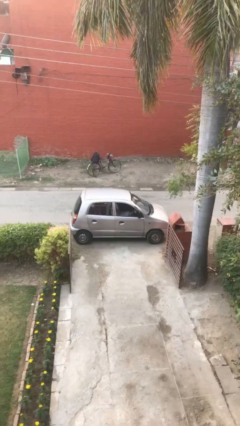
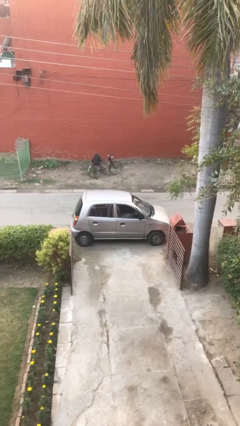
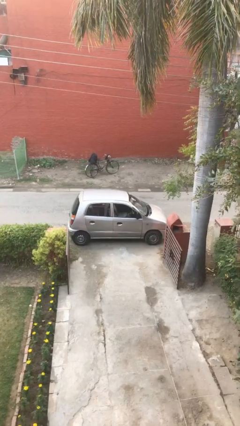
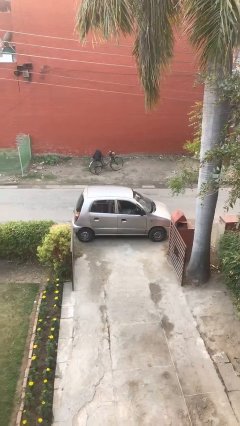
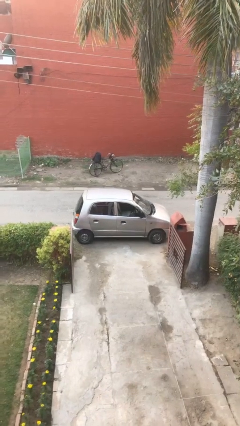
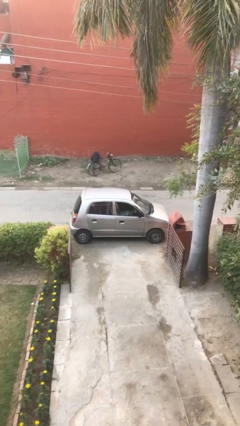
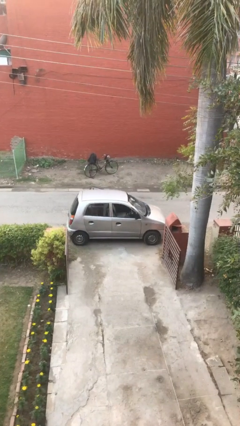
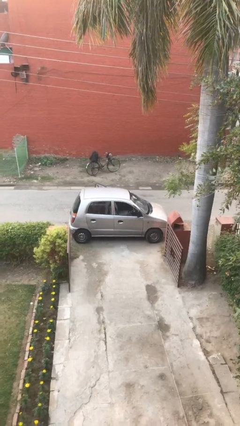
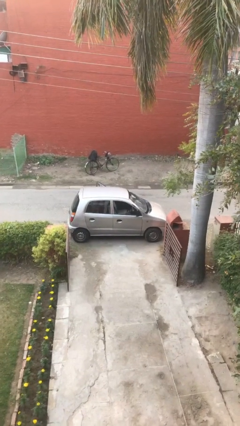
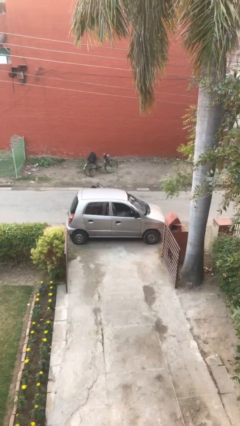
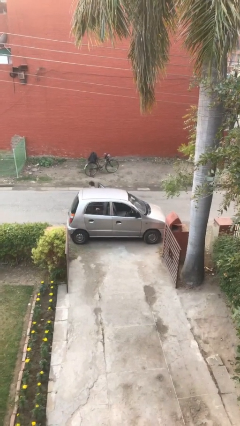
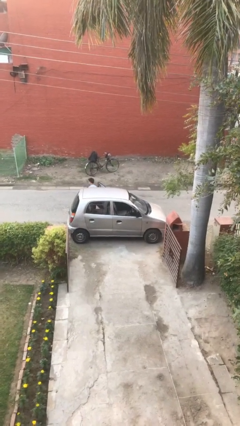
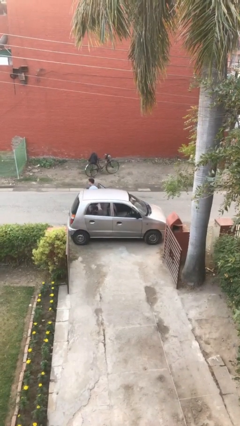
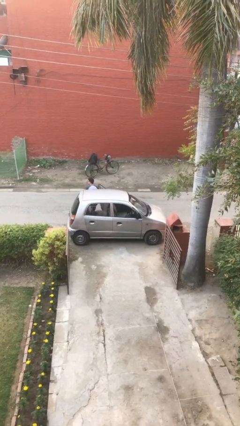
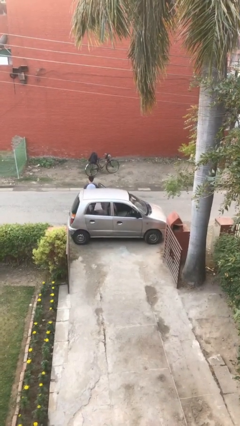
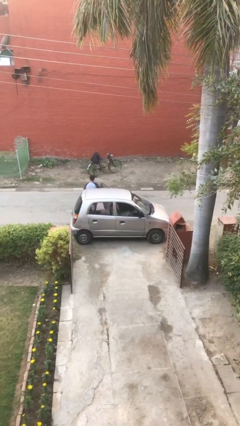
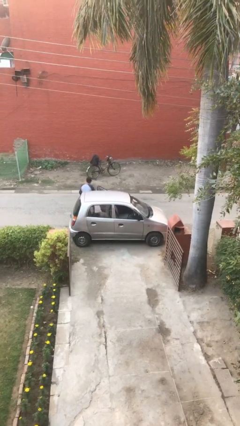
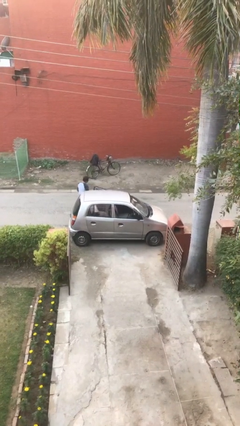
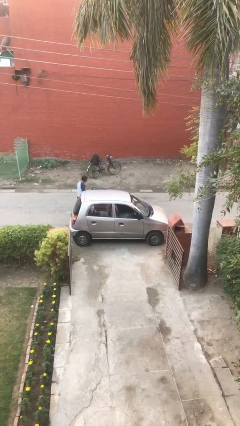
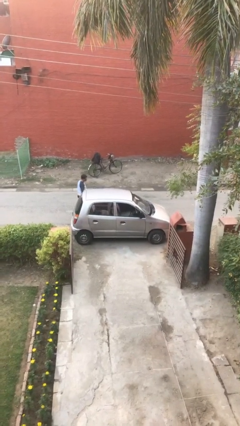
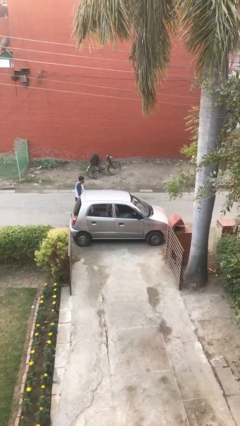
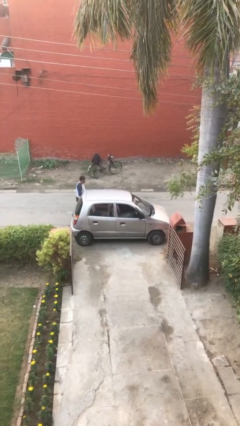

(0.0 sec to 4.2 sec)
car drops off person

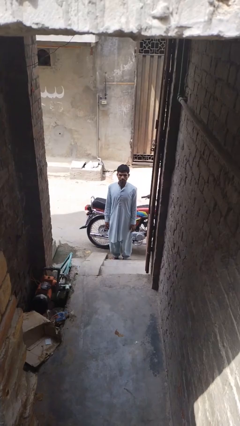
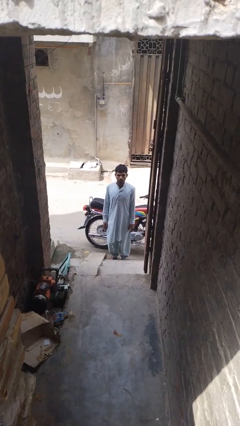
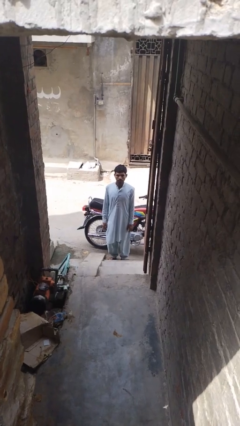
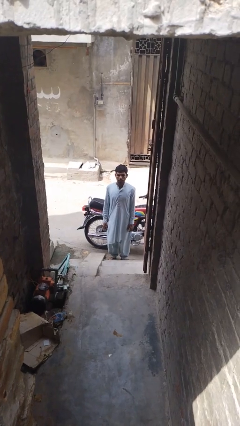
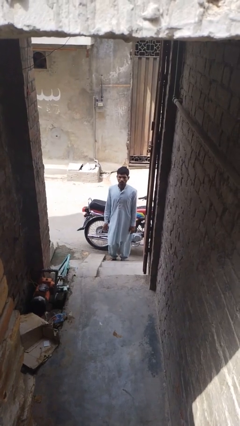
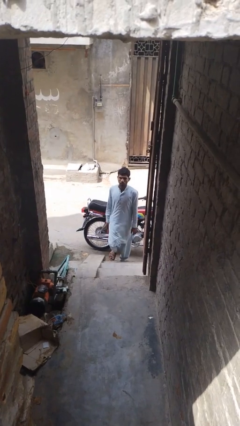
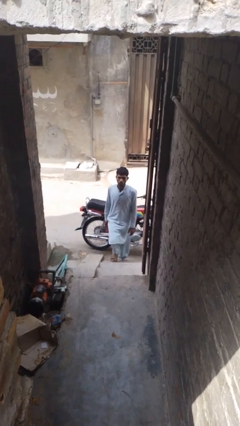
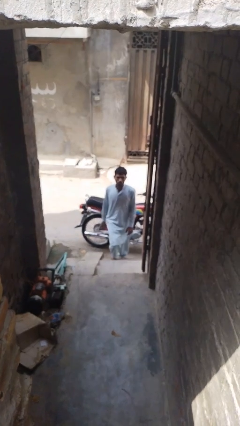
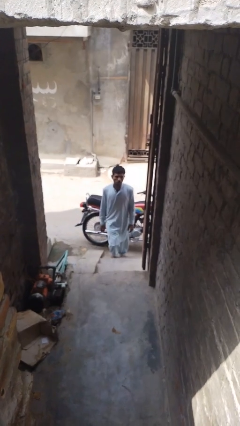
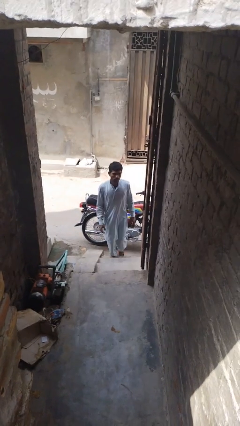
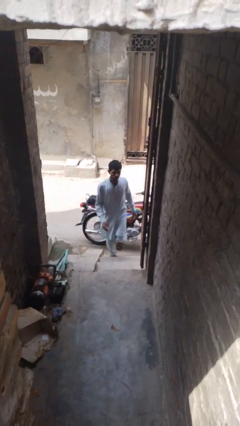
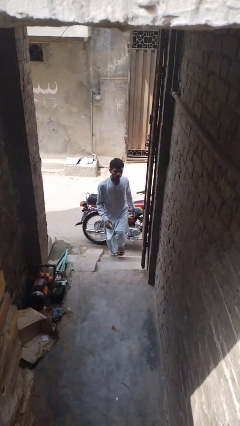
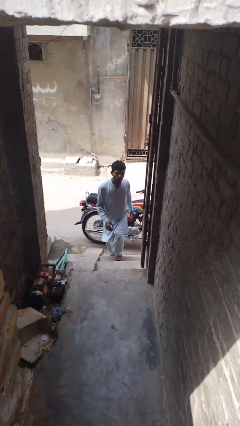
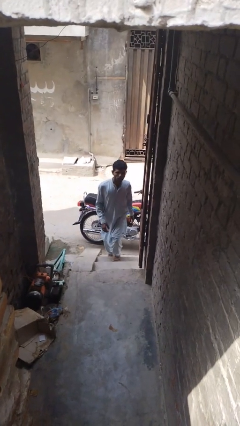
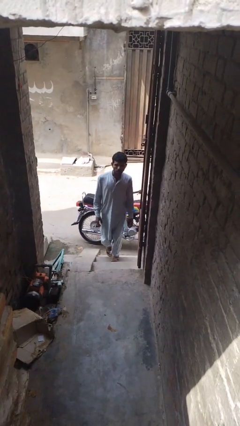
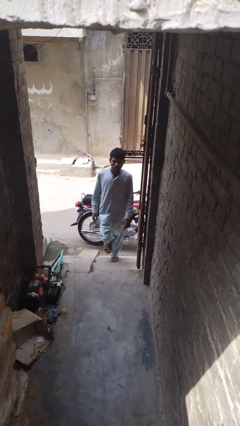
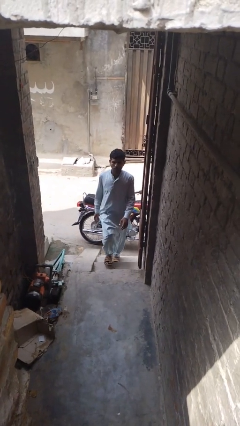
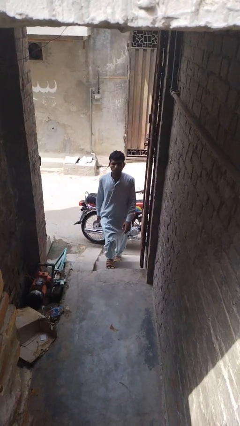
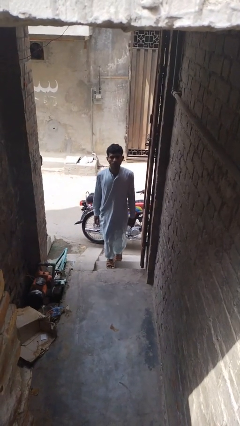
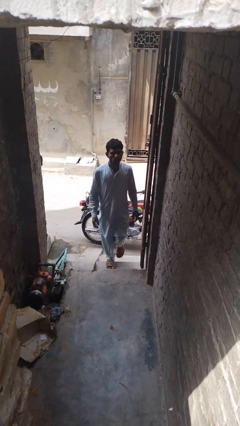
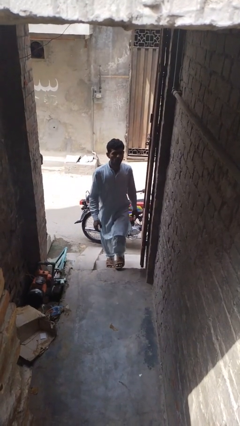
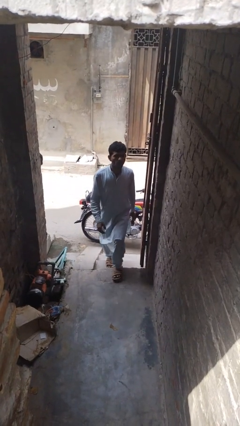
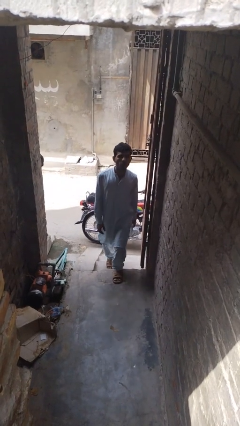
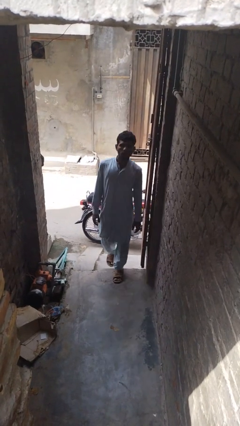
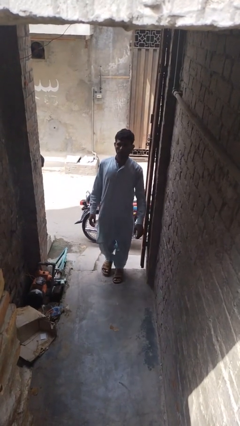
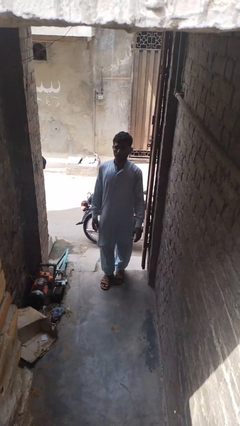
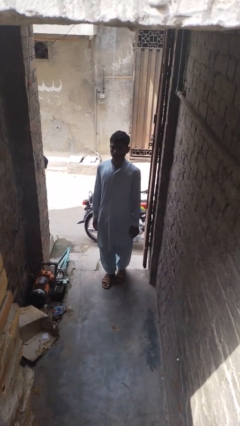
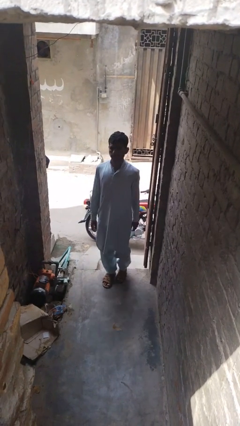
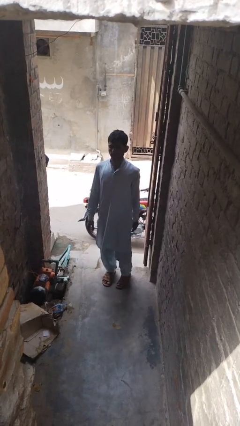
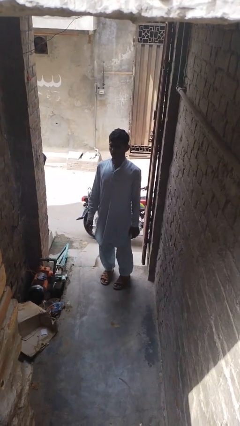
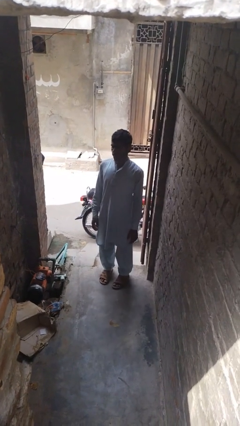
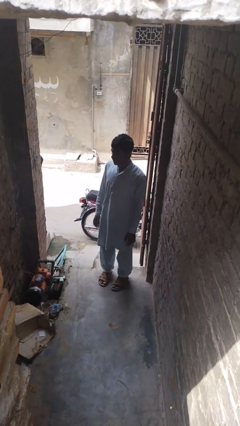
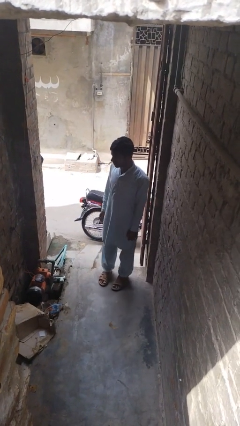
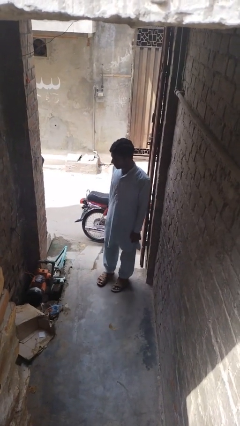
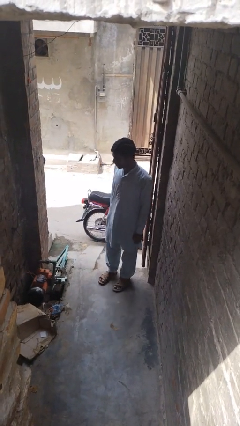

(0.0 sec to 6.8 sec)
person climbs up stairs

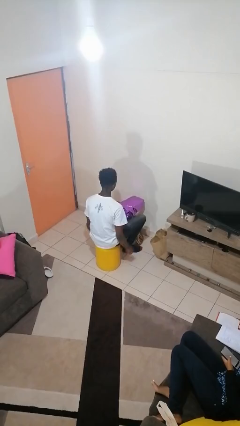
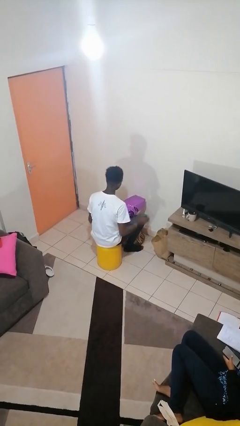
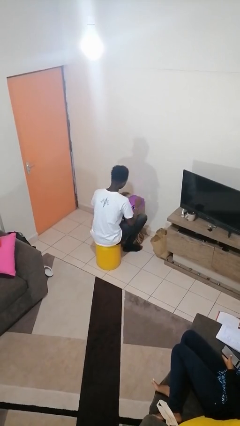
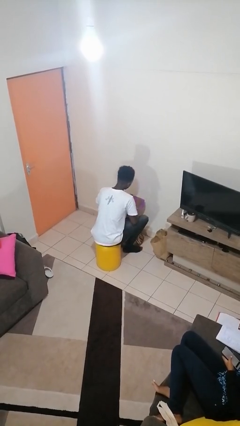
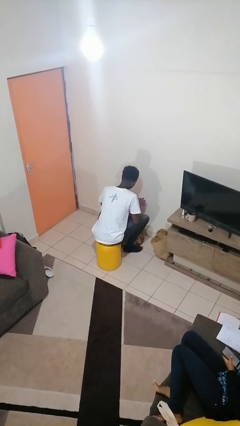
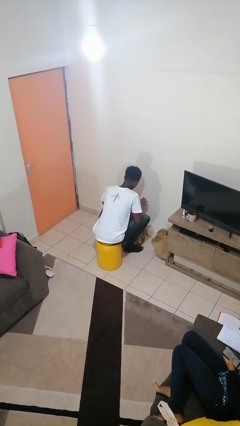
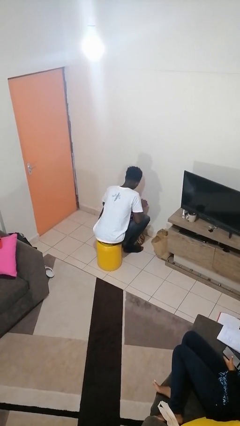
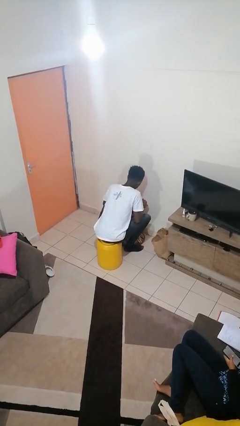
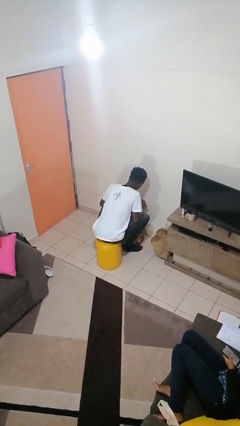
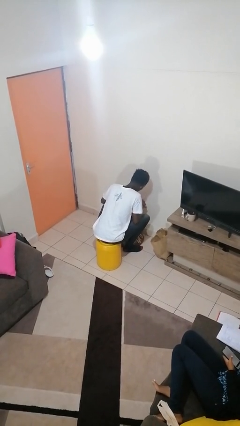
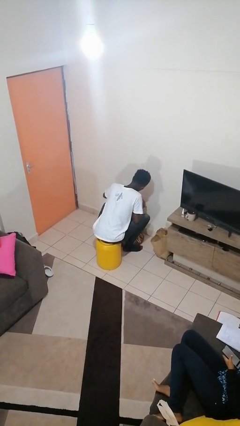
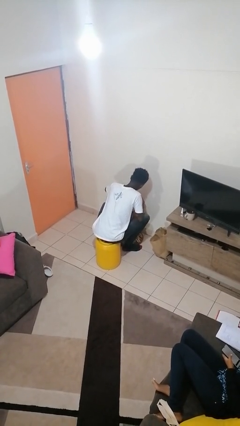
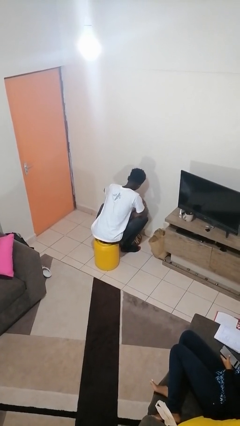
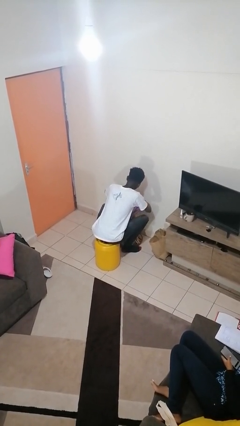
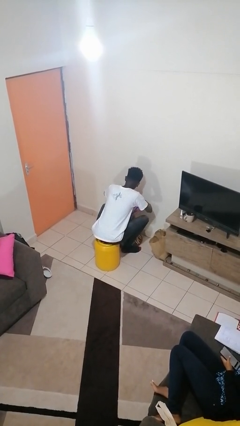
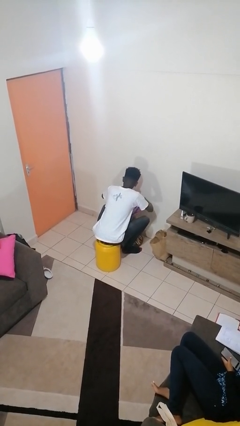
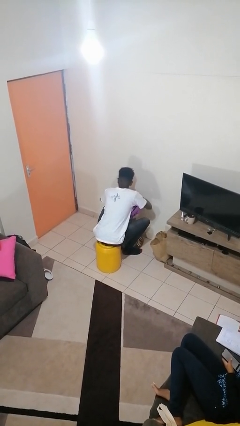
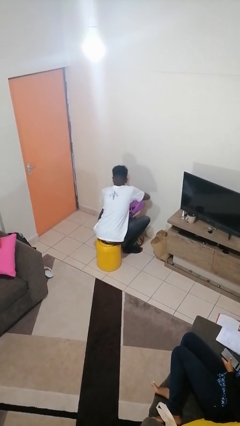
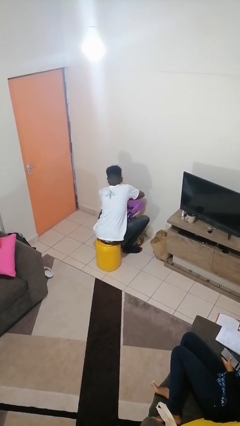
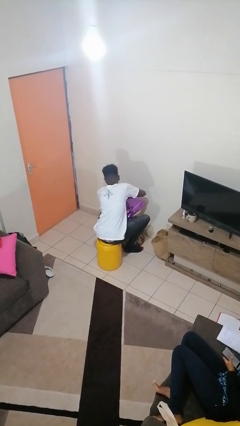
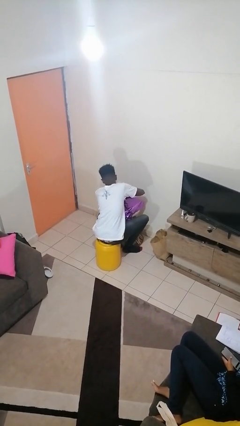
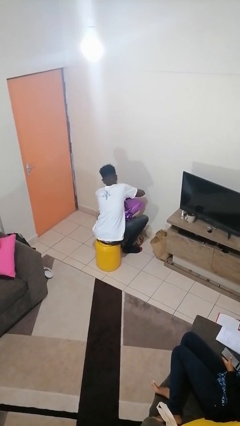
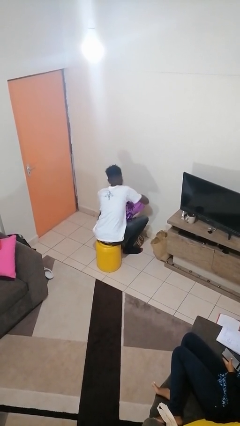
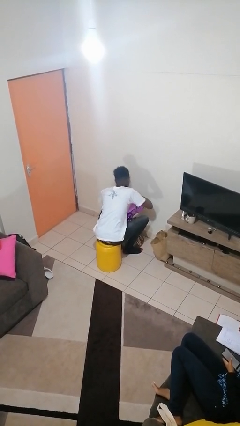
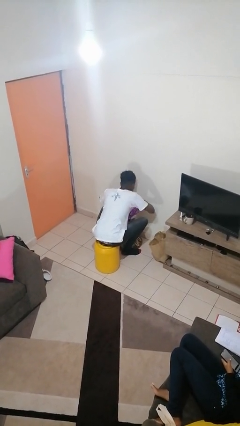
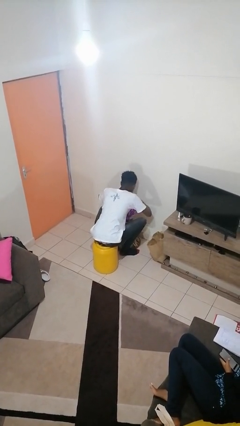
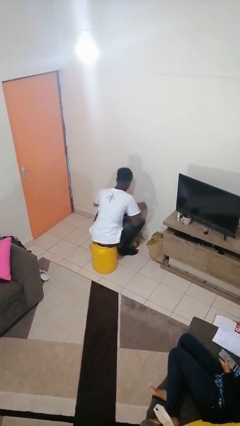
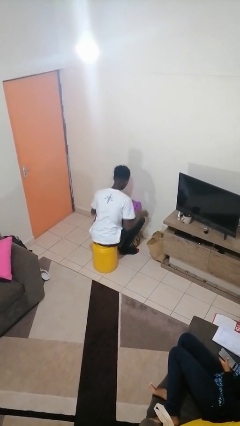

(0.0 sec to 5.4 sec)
person wraps box

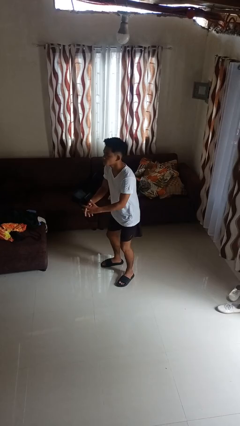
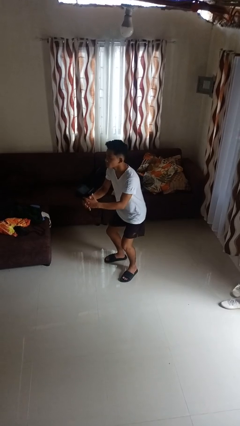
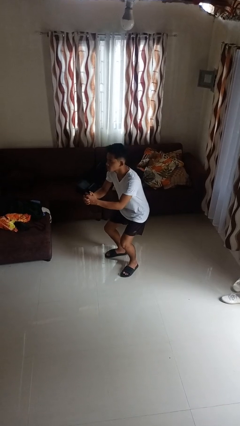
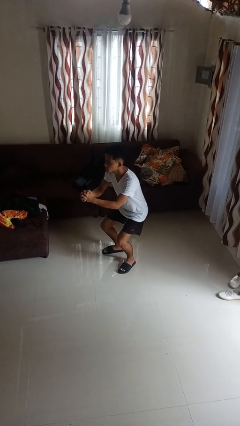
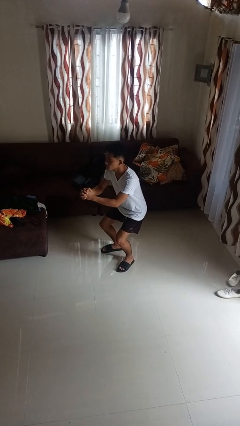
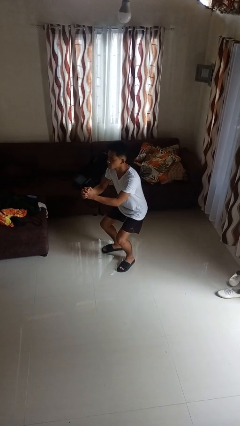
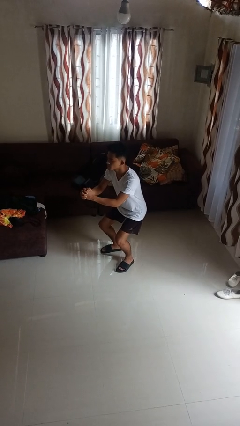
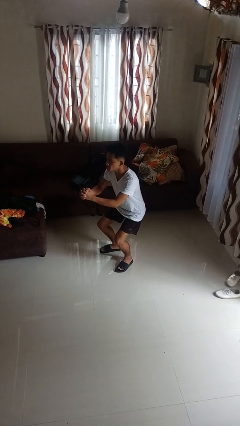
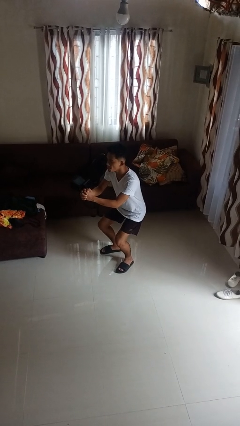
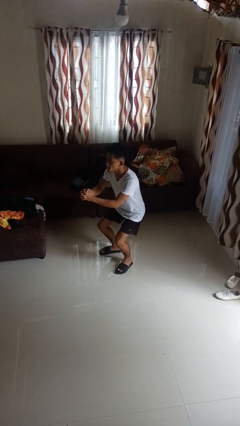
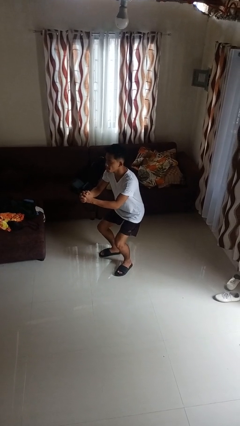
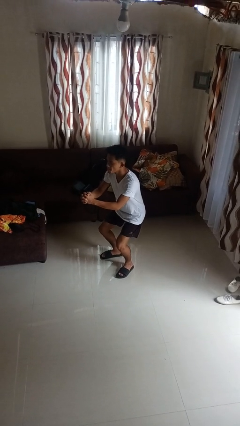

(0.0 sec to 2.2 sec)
person squats
